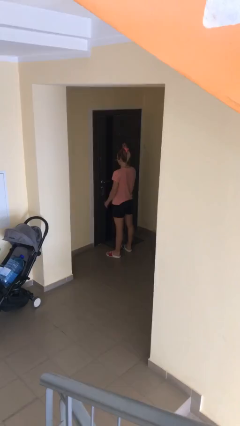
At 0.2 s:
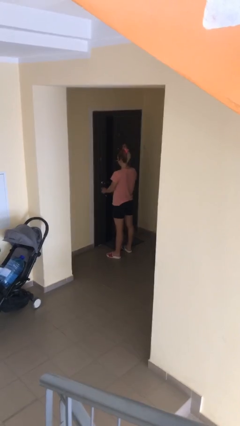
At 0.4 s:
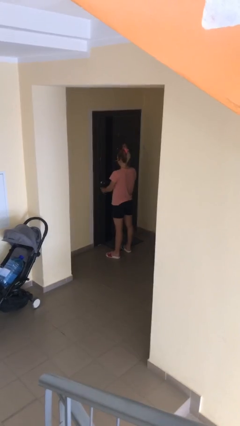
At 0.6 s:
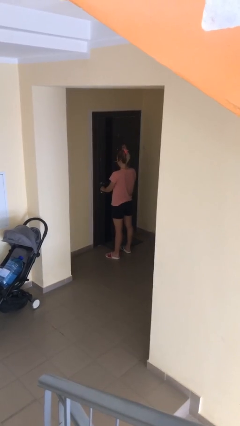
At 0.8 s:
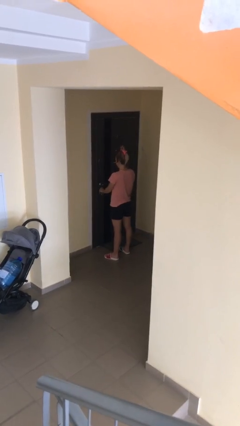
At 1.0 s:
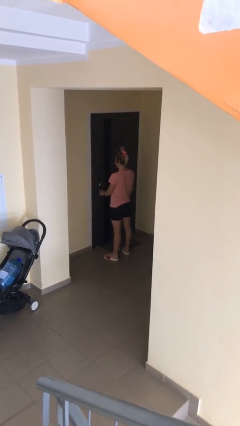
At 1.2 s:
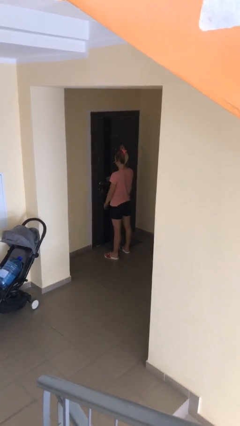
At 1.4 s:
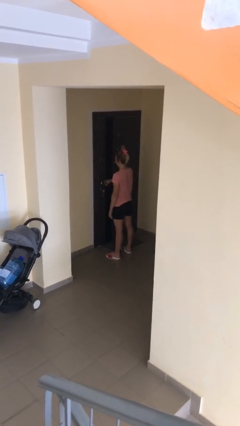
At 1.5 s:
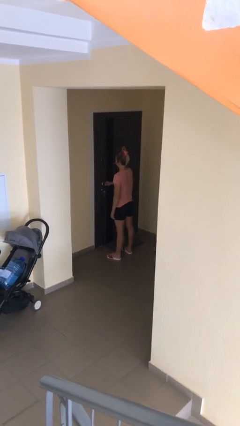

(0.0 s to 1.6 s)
person unlocks door with keys

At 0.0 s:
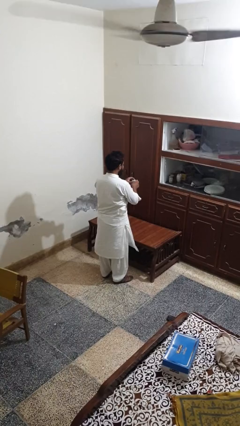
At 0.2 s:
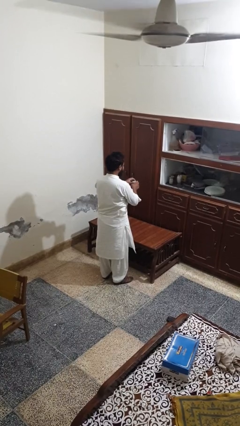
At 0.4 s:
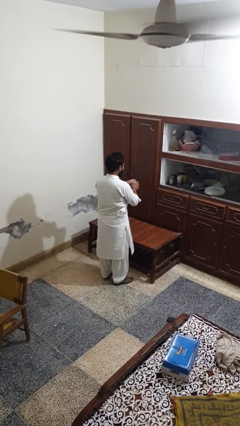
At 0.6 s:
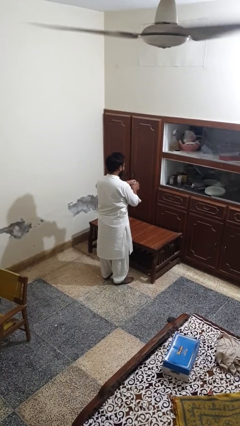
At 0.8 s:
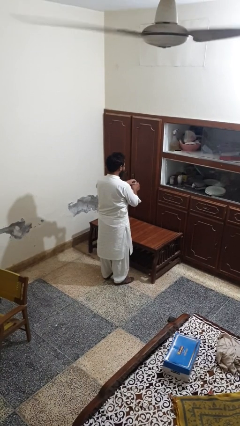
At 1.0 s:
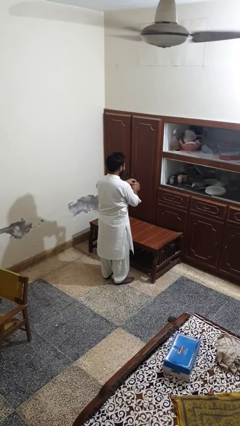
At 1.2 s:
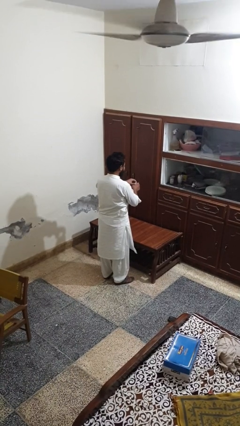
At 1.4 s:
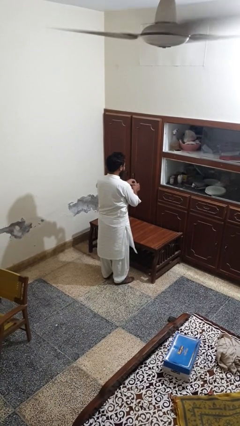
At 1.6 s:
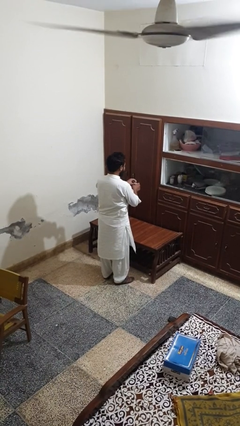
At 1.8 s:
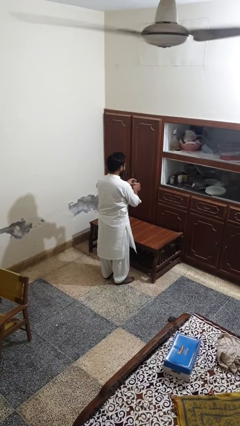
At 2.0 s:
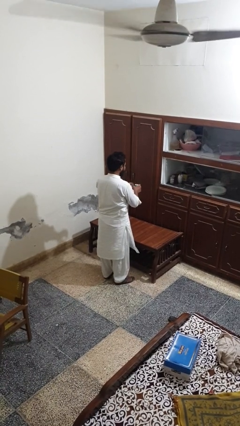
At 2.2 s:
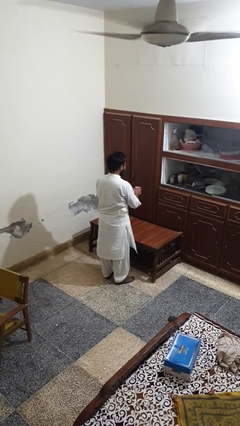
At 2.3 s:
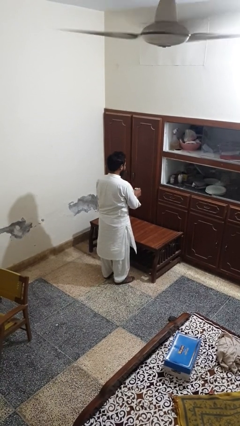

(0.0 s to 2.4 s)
person opens beverage can

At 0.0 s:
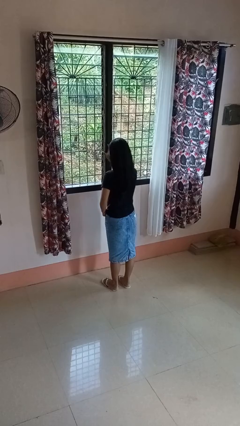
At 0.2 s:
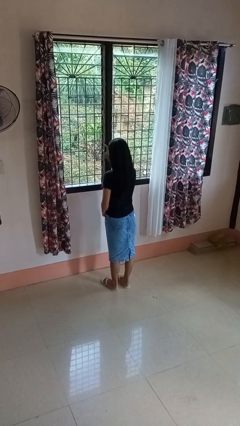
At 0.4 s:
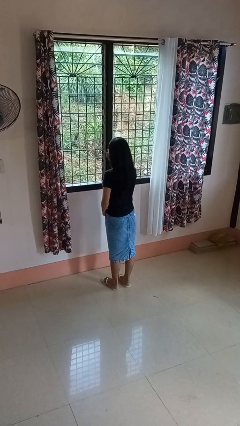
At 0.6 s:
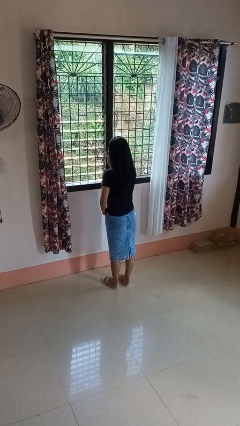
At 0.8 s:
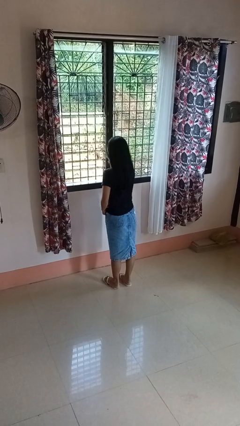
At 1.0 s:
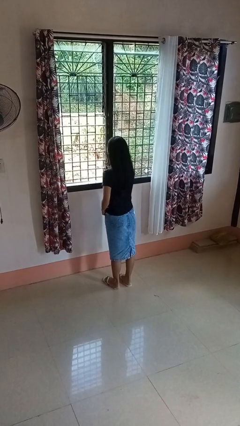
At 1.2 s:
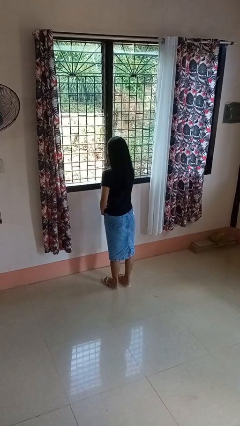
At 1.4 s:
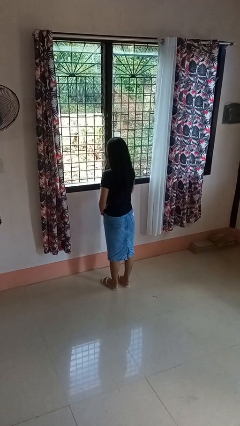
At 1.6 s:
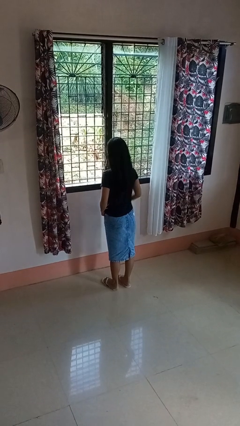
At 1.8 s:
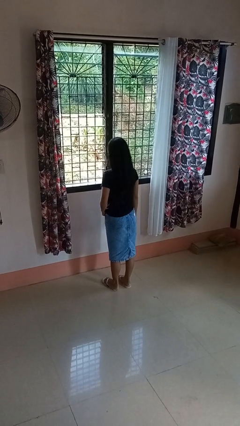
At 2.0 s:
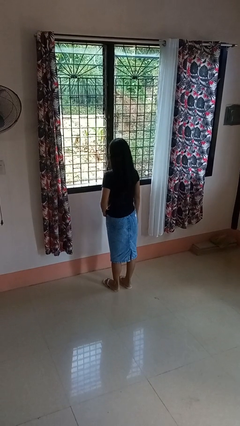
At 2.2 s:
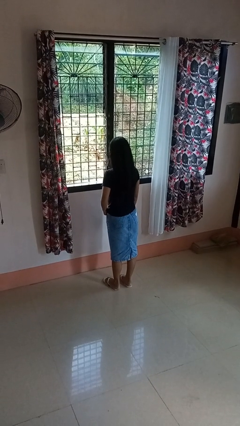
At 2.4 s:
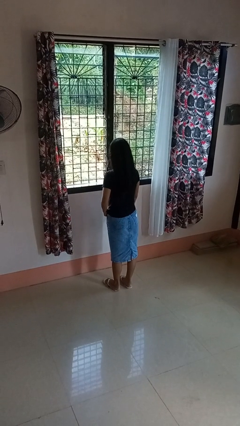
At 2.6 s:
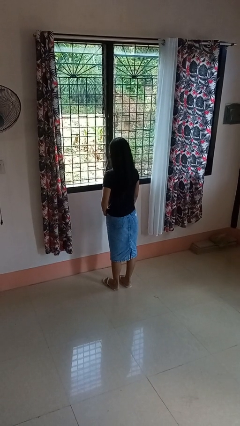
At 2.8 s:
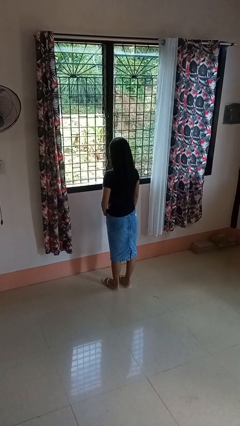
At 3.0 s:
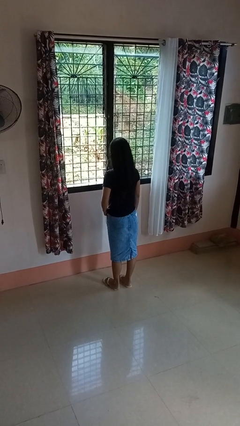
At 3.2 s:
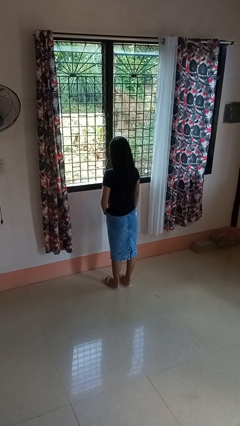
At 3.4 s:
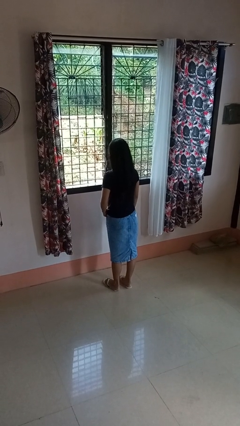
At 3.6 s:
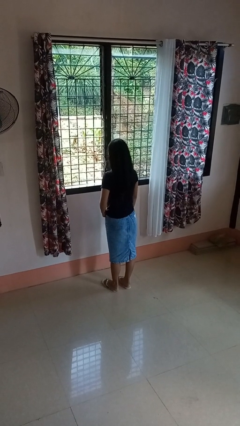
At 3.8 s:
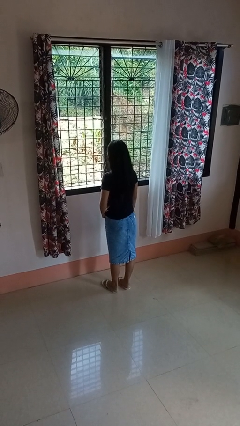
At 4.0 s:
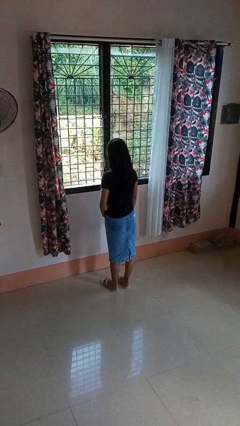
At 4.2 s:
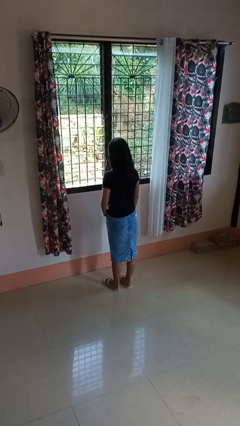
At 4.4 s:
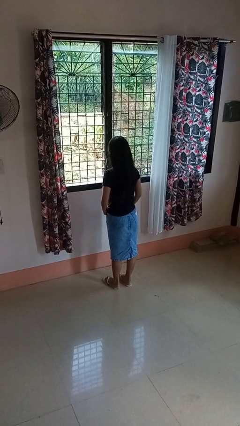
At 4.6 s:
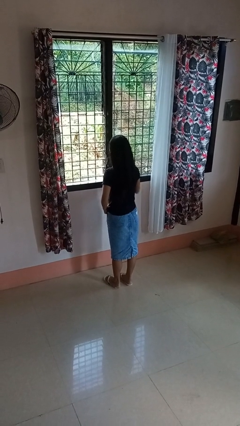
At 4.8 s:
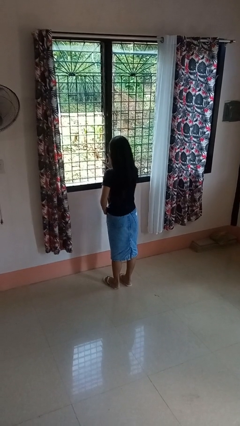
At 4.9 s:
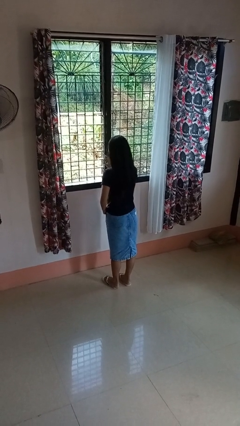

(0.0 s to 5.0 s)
person opens home window

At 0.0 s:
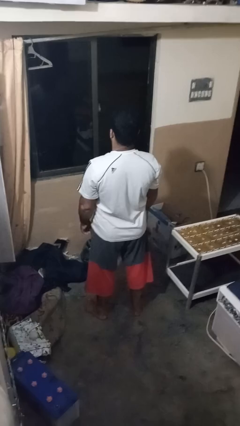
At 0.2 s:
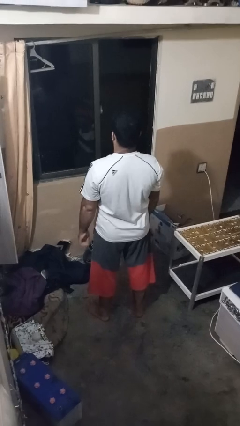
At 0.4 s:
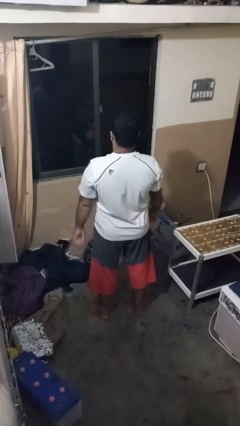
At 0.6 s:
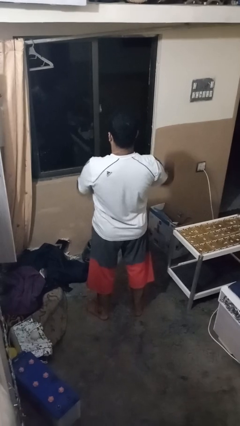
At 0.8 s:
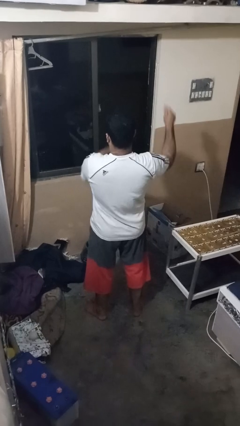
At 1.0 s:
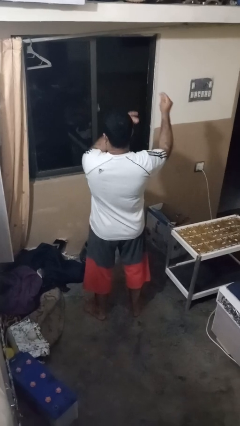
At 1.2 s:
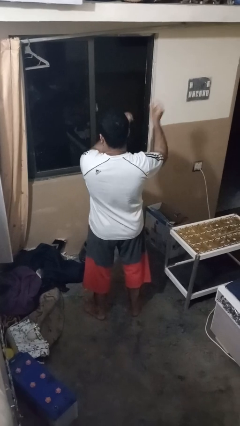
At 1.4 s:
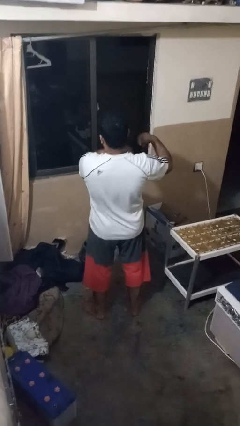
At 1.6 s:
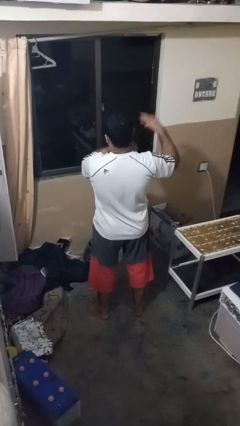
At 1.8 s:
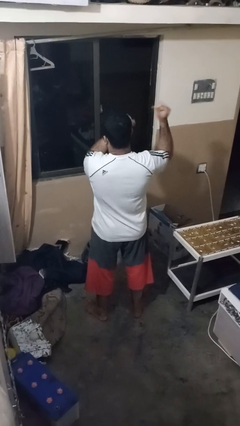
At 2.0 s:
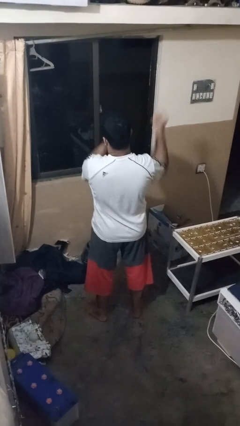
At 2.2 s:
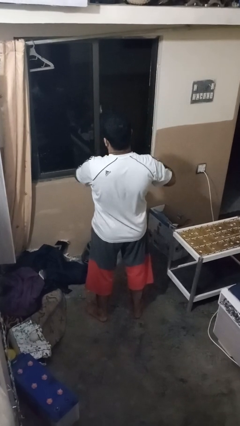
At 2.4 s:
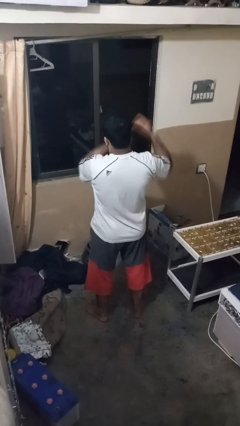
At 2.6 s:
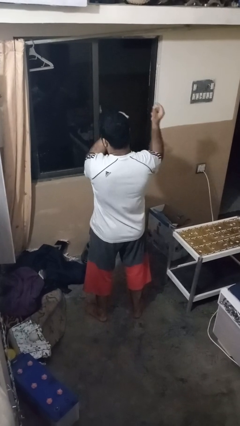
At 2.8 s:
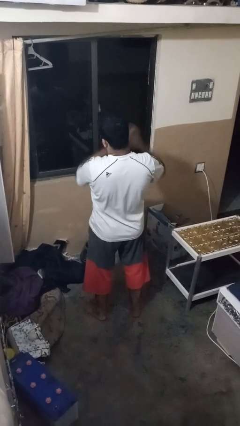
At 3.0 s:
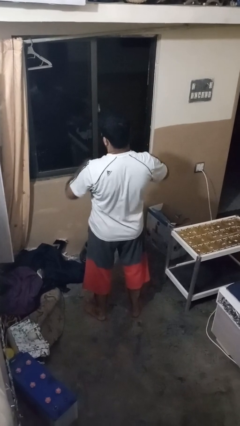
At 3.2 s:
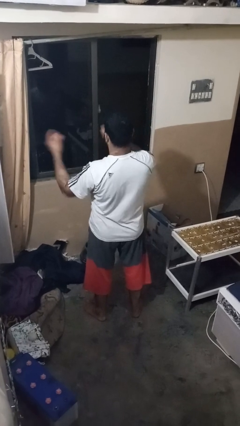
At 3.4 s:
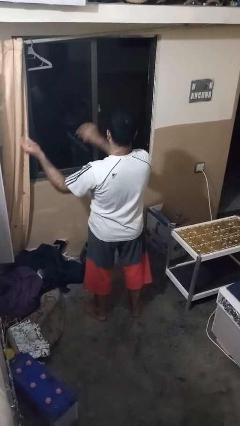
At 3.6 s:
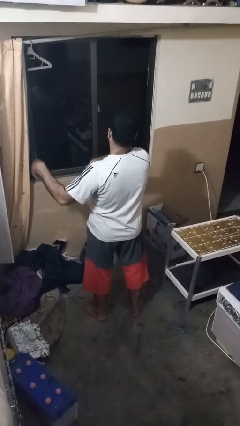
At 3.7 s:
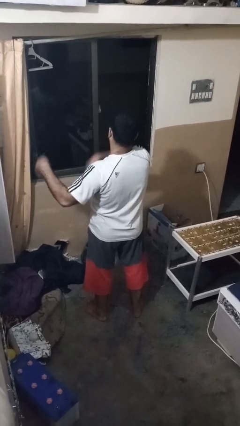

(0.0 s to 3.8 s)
person snaps fingers

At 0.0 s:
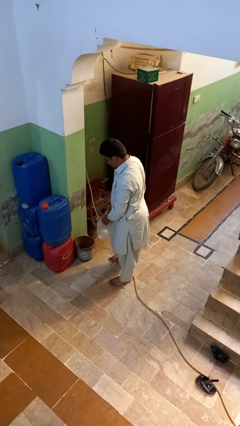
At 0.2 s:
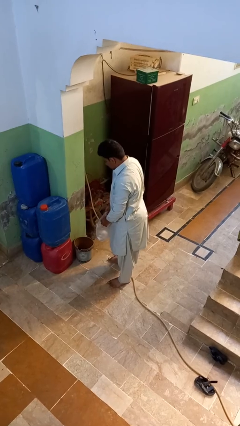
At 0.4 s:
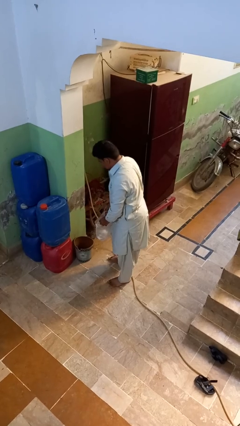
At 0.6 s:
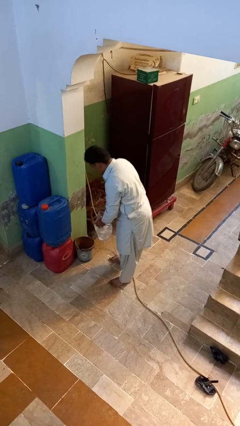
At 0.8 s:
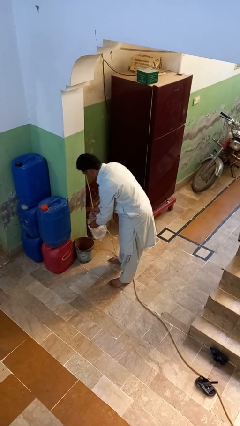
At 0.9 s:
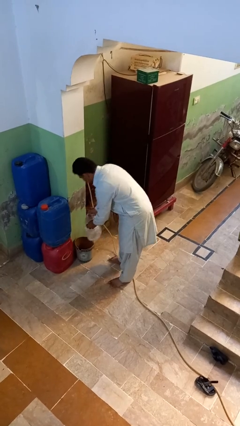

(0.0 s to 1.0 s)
person inserts trashbag into trashcan

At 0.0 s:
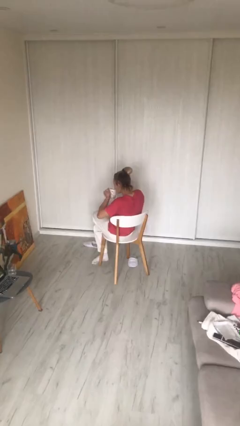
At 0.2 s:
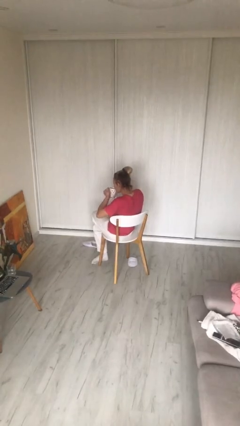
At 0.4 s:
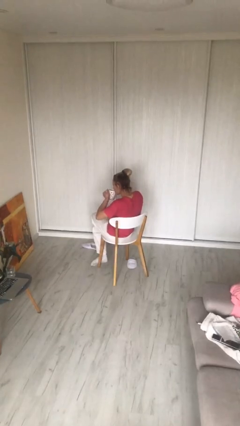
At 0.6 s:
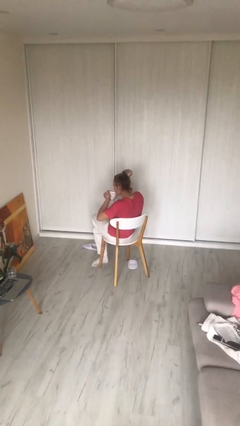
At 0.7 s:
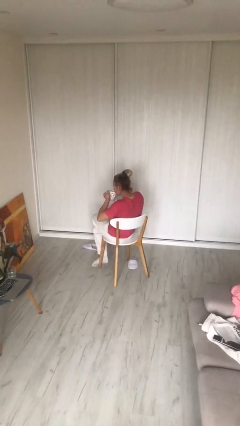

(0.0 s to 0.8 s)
person drinks from mug

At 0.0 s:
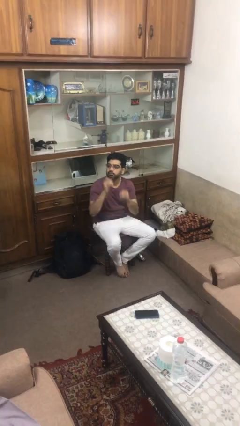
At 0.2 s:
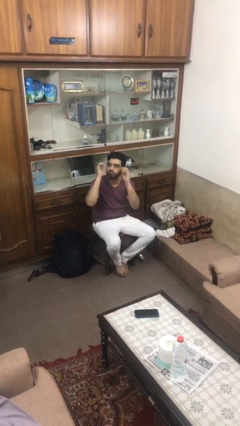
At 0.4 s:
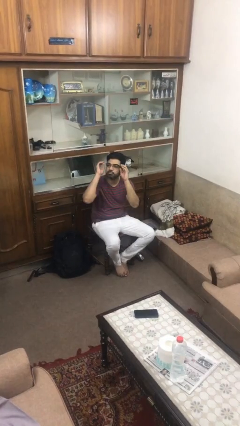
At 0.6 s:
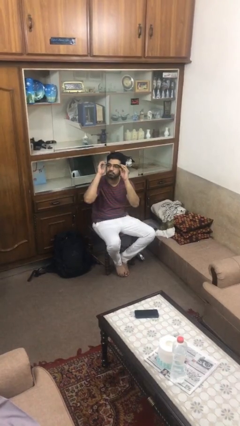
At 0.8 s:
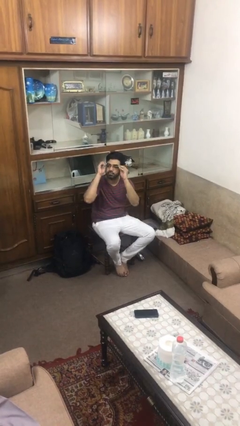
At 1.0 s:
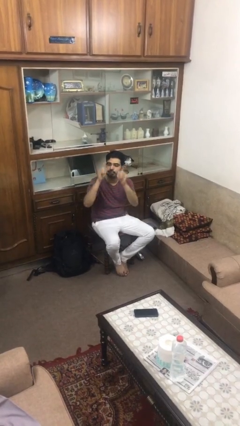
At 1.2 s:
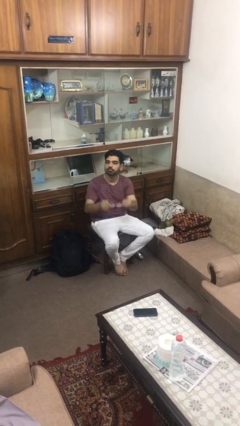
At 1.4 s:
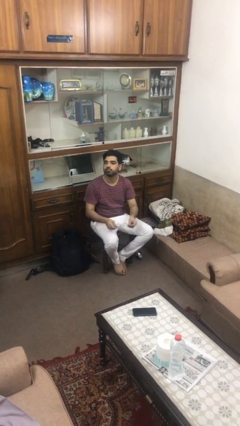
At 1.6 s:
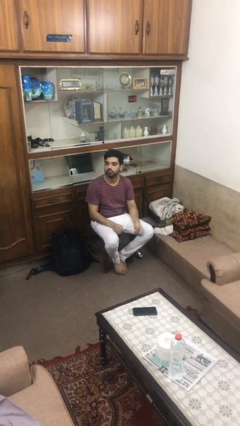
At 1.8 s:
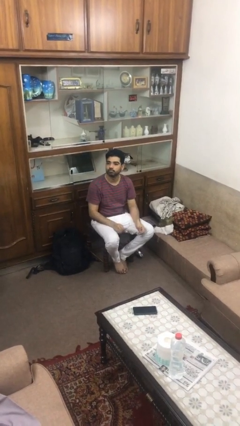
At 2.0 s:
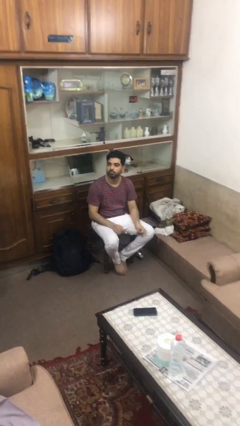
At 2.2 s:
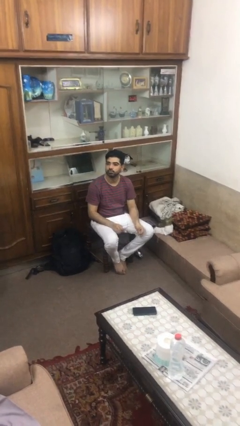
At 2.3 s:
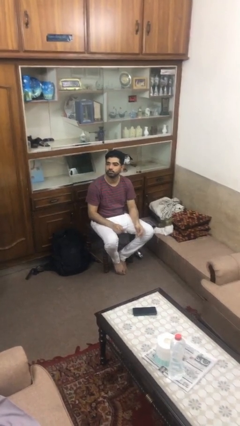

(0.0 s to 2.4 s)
person takes off glasses
